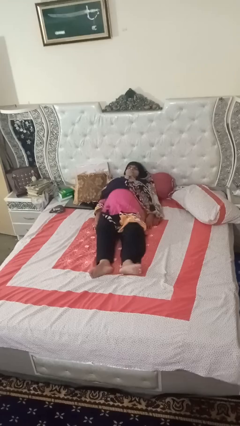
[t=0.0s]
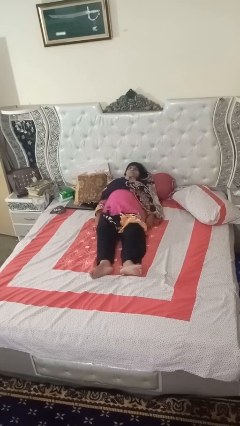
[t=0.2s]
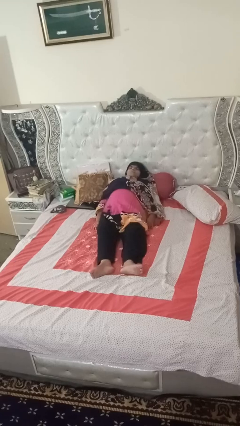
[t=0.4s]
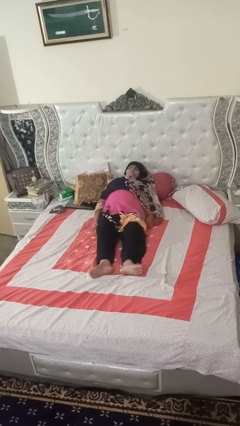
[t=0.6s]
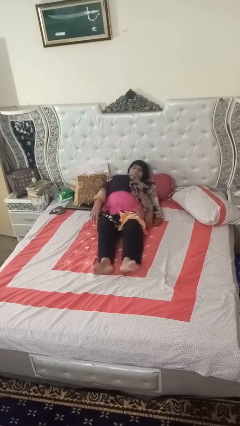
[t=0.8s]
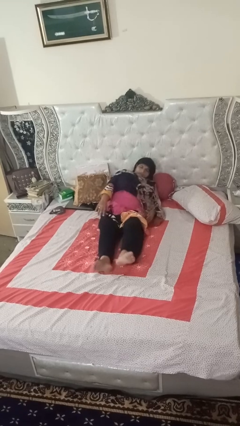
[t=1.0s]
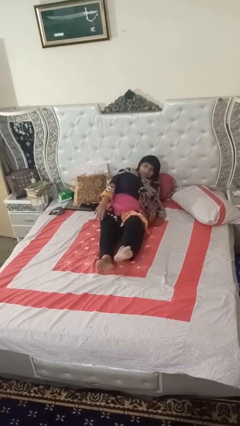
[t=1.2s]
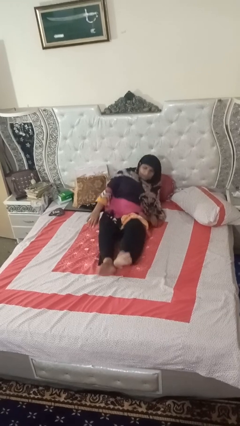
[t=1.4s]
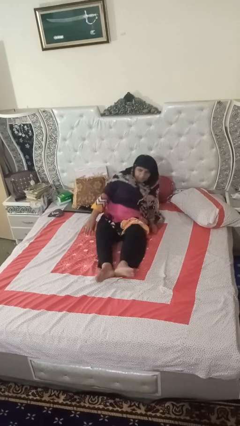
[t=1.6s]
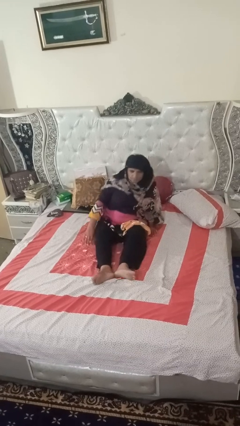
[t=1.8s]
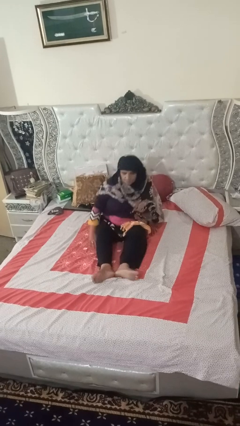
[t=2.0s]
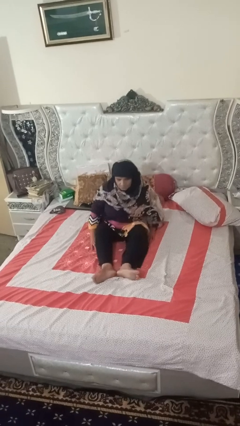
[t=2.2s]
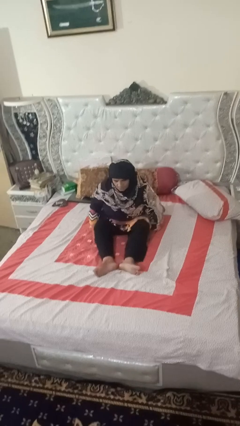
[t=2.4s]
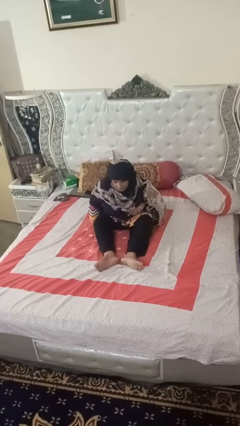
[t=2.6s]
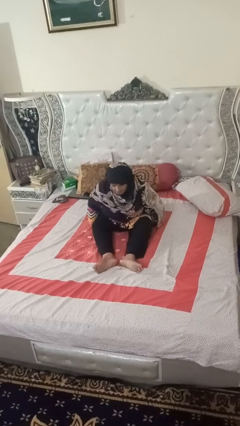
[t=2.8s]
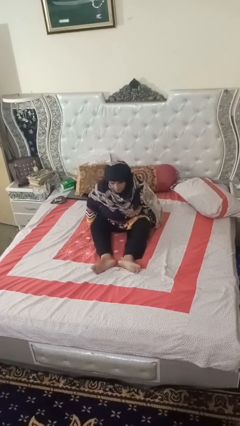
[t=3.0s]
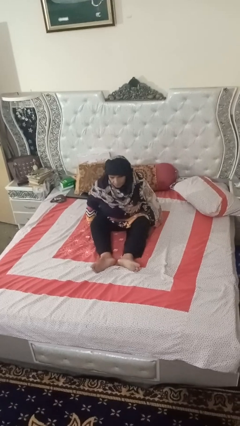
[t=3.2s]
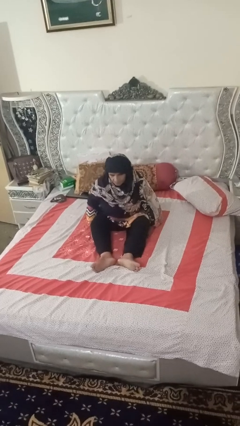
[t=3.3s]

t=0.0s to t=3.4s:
person stands up

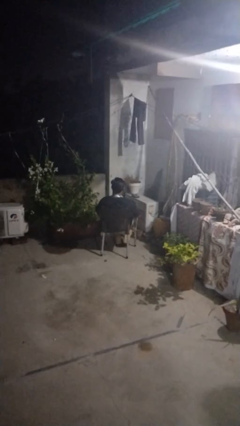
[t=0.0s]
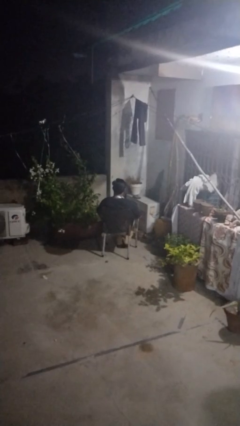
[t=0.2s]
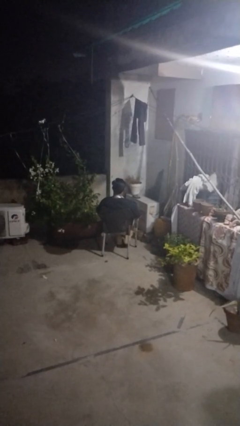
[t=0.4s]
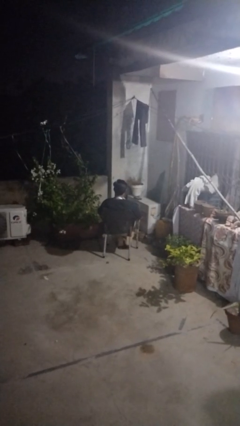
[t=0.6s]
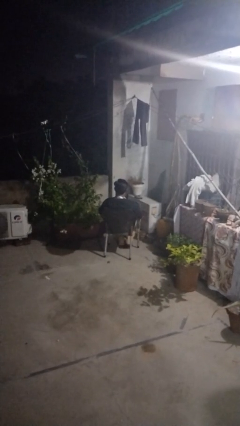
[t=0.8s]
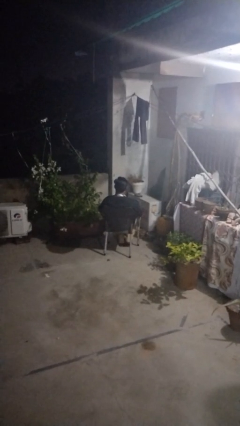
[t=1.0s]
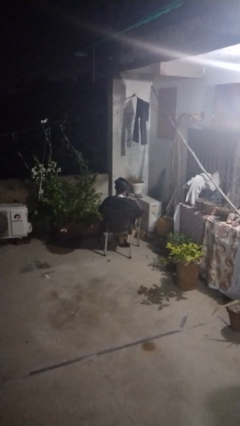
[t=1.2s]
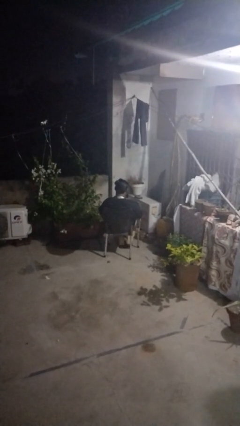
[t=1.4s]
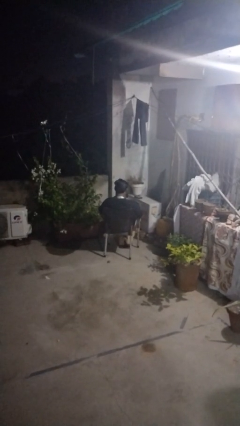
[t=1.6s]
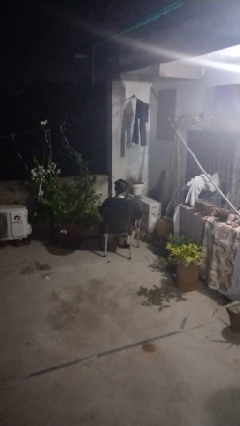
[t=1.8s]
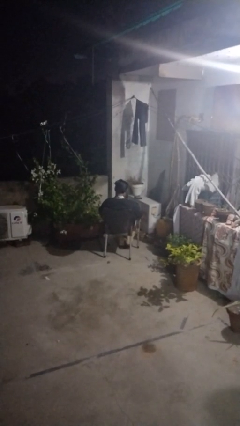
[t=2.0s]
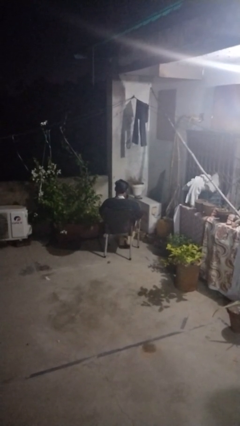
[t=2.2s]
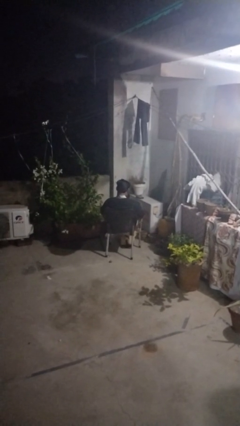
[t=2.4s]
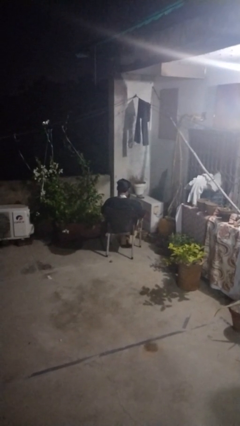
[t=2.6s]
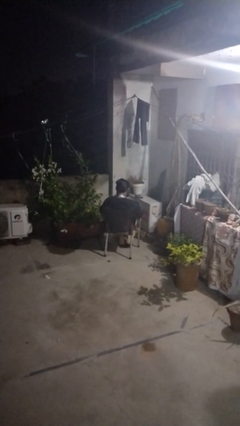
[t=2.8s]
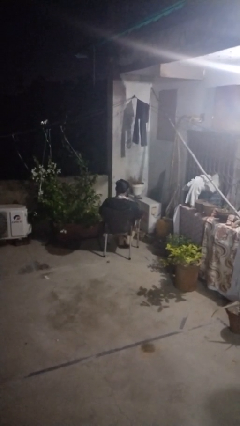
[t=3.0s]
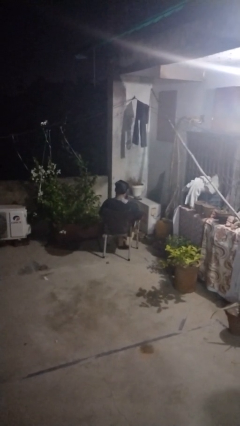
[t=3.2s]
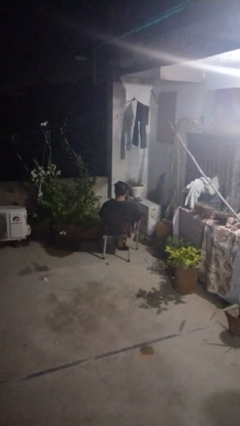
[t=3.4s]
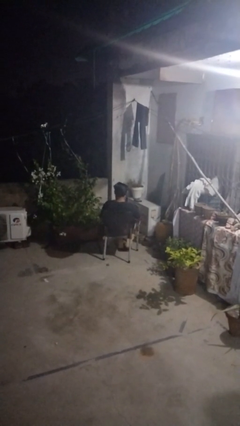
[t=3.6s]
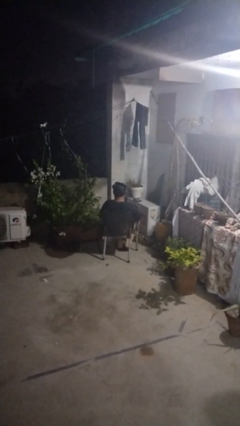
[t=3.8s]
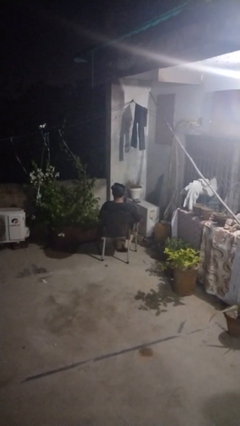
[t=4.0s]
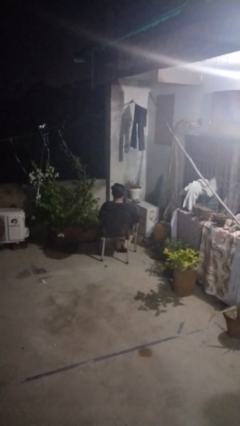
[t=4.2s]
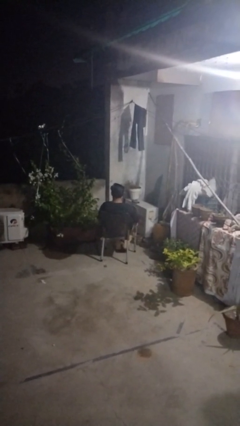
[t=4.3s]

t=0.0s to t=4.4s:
person takes off necktie

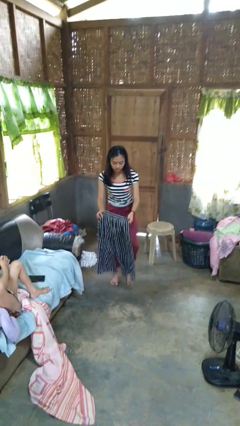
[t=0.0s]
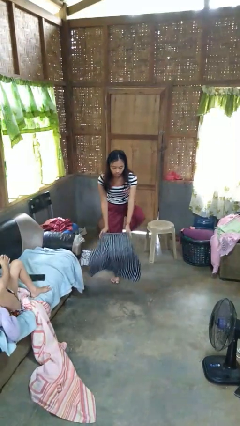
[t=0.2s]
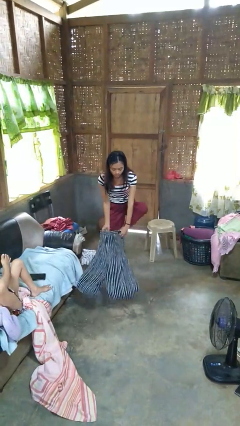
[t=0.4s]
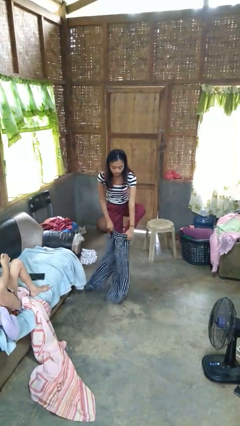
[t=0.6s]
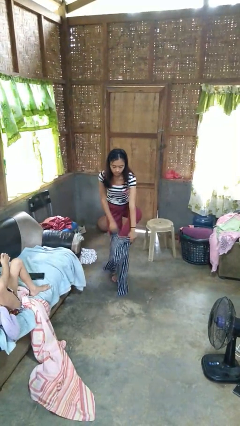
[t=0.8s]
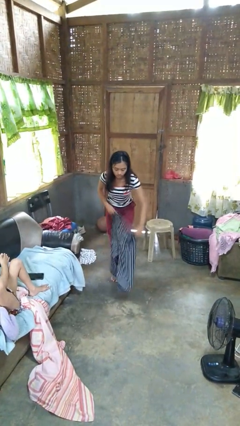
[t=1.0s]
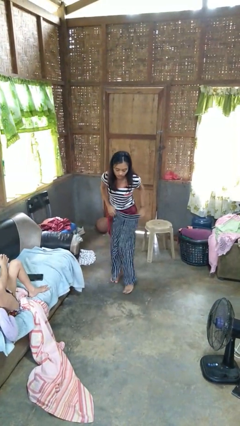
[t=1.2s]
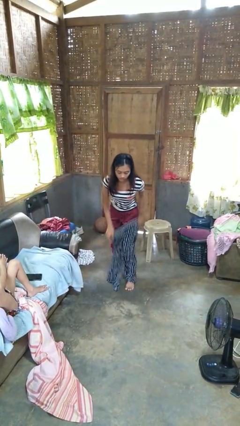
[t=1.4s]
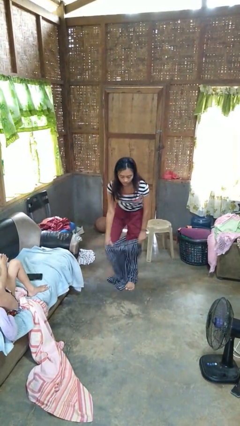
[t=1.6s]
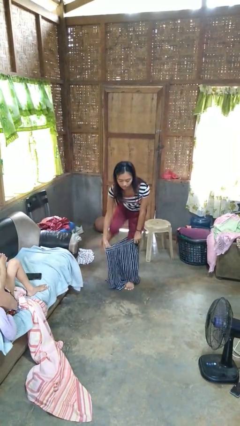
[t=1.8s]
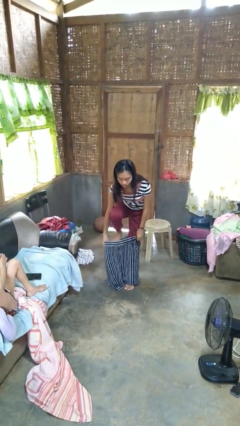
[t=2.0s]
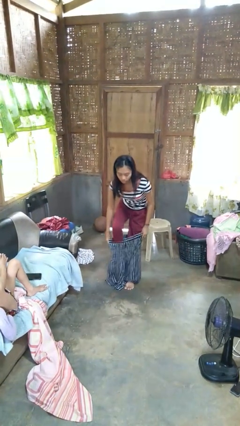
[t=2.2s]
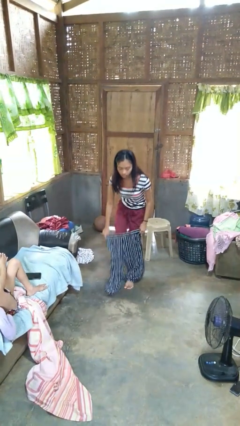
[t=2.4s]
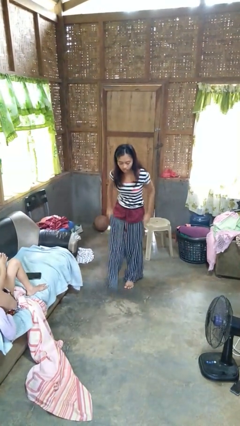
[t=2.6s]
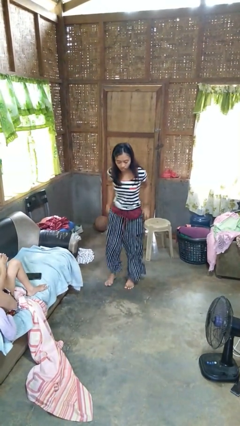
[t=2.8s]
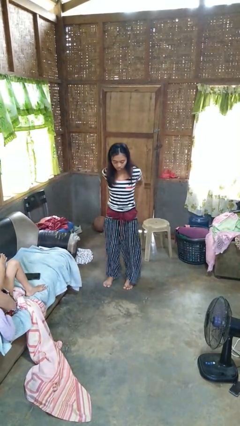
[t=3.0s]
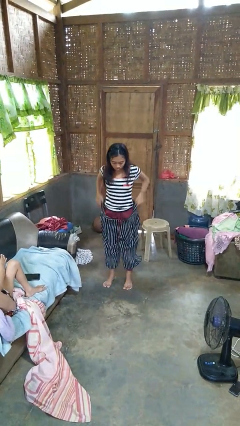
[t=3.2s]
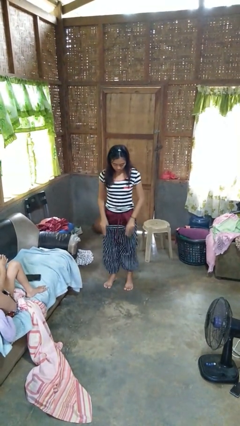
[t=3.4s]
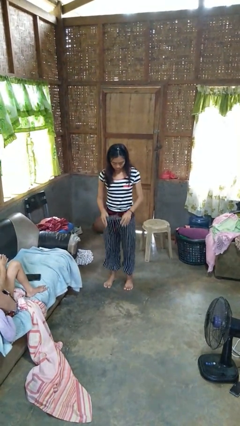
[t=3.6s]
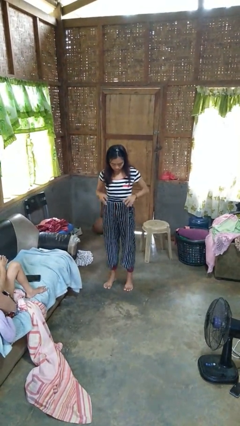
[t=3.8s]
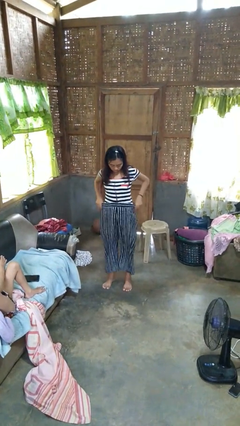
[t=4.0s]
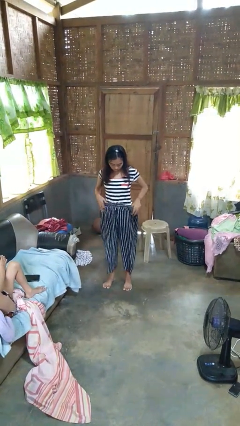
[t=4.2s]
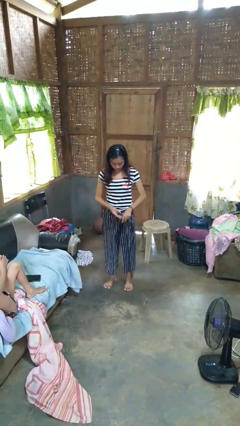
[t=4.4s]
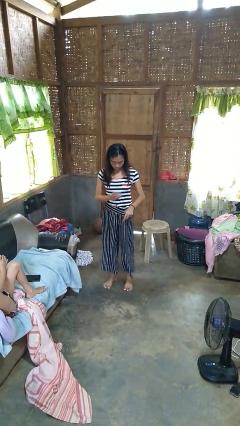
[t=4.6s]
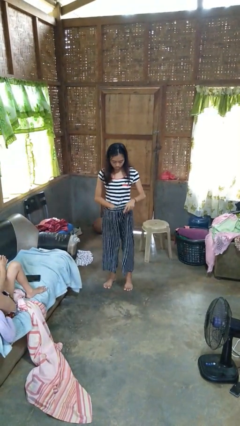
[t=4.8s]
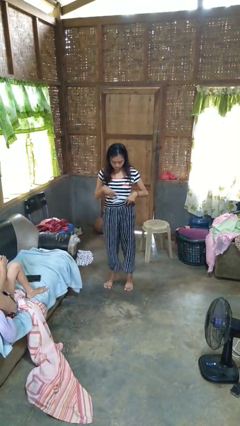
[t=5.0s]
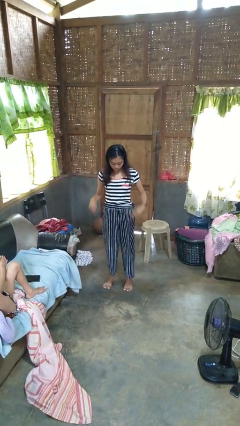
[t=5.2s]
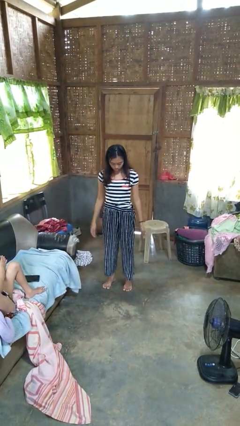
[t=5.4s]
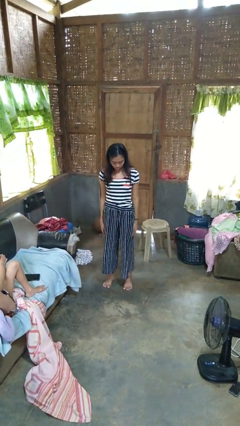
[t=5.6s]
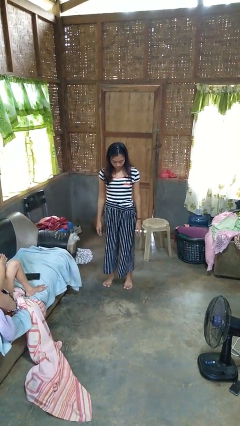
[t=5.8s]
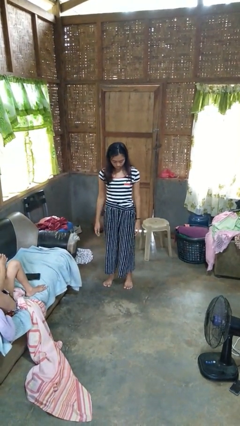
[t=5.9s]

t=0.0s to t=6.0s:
person puts on pants

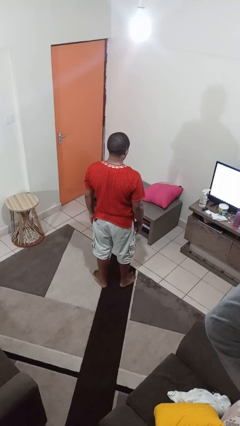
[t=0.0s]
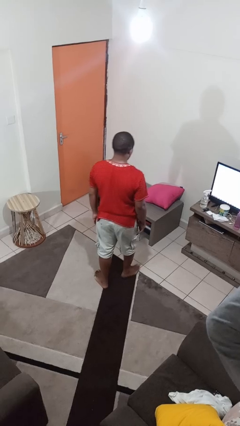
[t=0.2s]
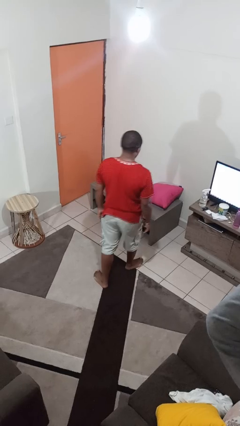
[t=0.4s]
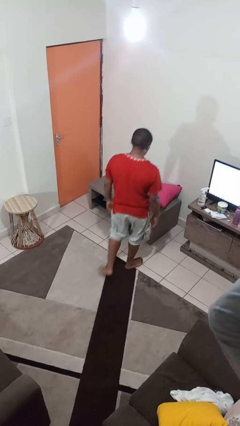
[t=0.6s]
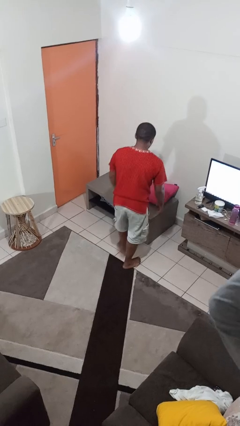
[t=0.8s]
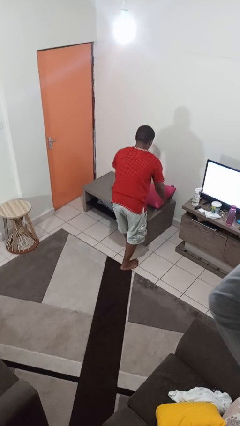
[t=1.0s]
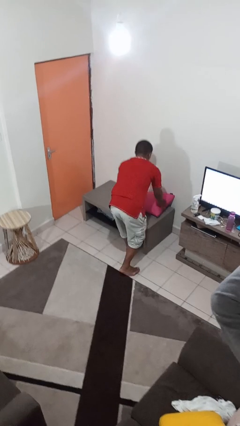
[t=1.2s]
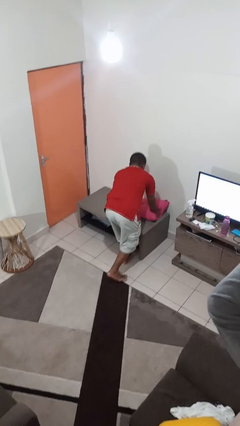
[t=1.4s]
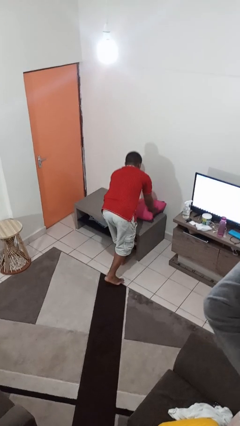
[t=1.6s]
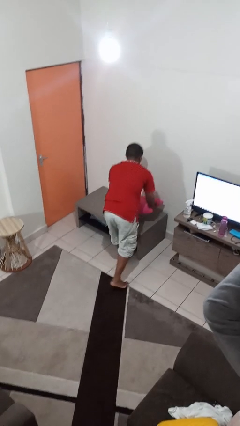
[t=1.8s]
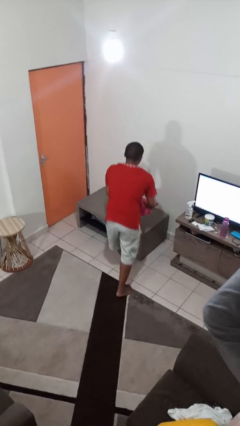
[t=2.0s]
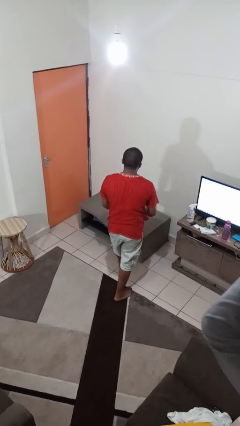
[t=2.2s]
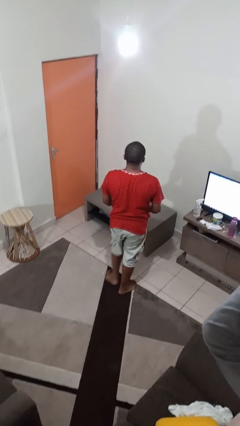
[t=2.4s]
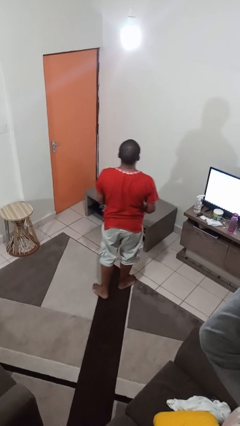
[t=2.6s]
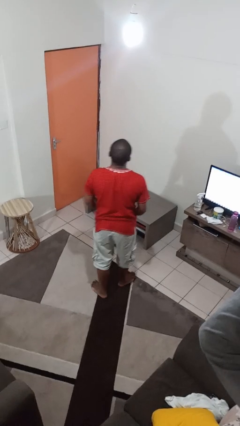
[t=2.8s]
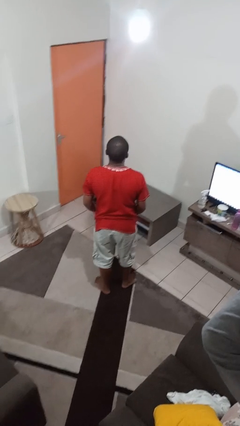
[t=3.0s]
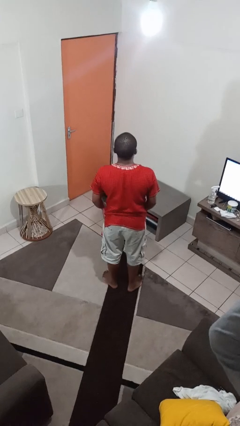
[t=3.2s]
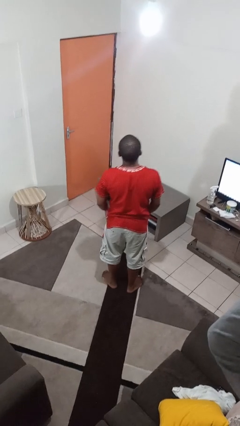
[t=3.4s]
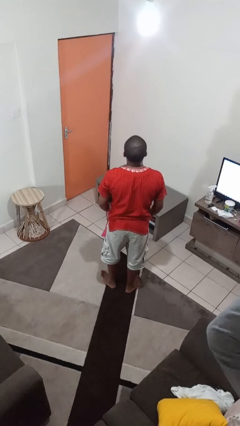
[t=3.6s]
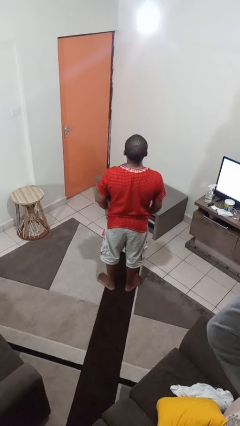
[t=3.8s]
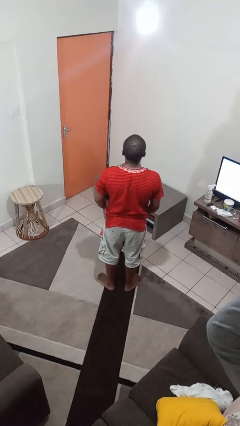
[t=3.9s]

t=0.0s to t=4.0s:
person picks up object from table
